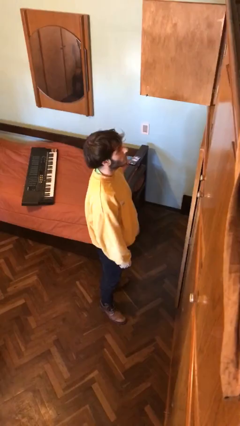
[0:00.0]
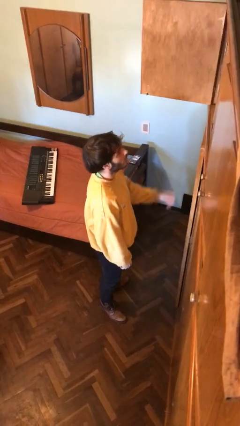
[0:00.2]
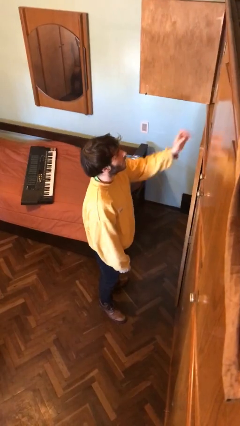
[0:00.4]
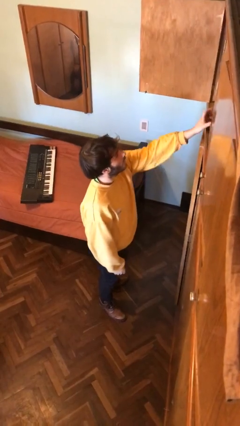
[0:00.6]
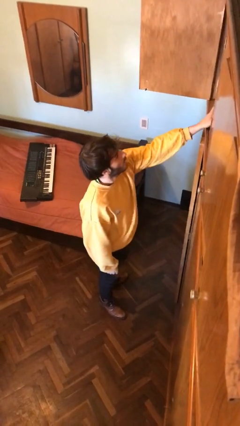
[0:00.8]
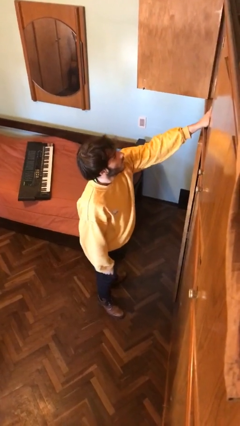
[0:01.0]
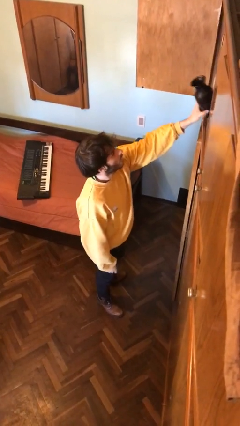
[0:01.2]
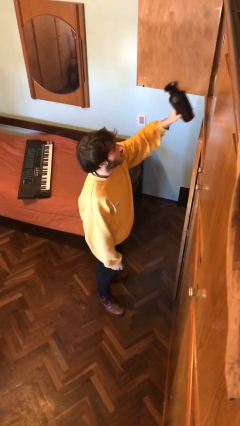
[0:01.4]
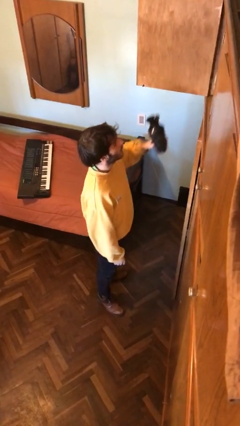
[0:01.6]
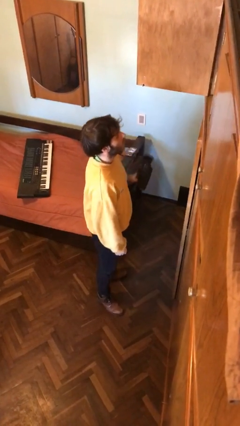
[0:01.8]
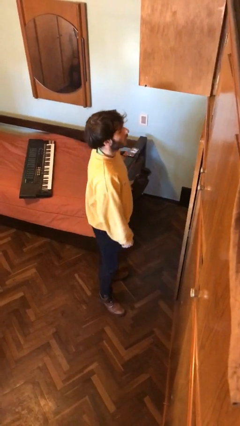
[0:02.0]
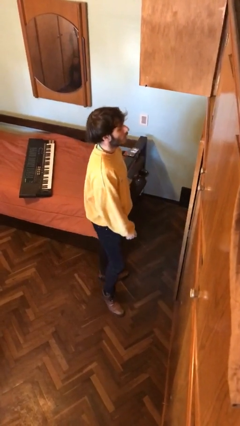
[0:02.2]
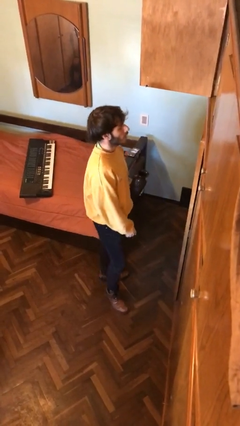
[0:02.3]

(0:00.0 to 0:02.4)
person picks up object from cabinet

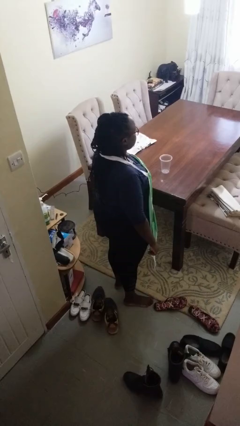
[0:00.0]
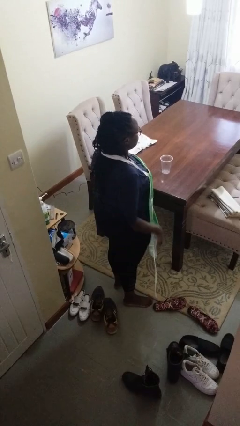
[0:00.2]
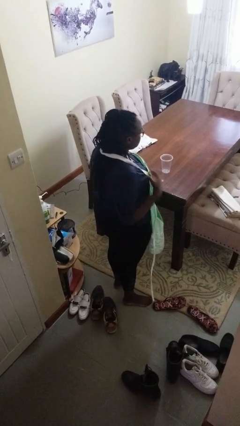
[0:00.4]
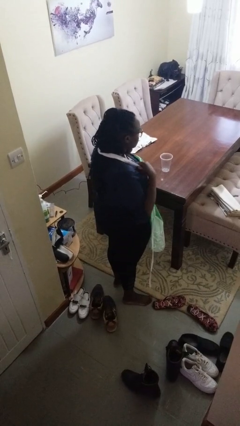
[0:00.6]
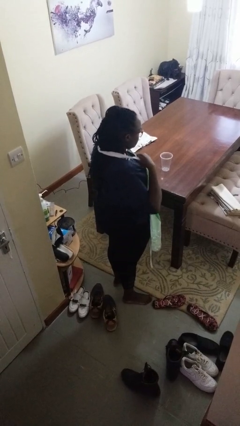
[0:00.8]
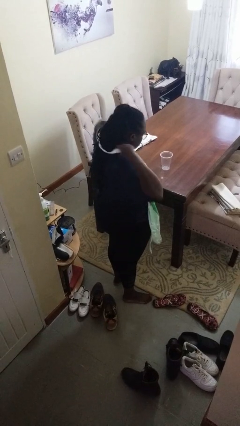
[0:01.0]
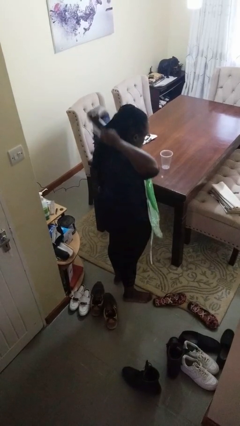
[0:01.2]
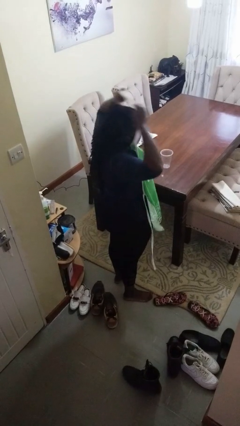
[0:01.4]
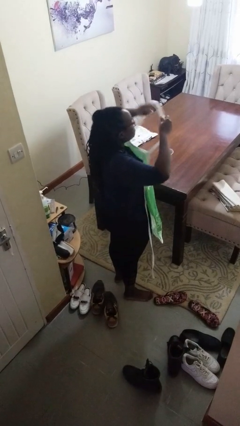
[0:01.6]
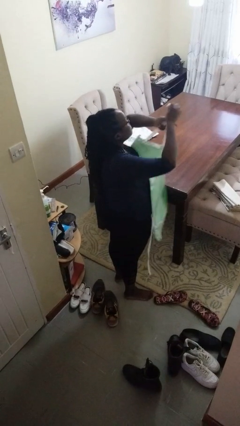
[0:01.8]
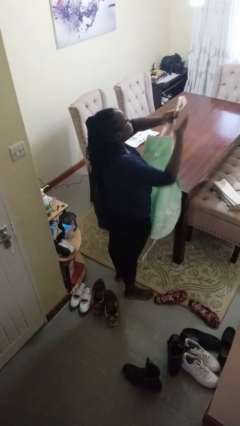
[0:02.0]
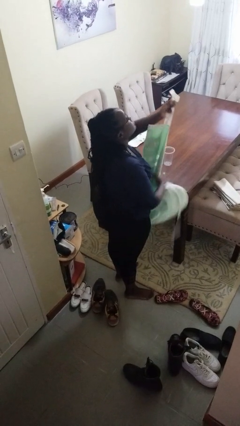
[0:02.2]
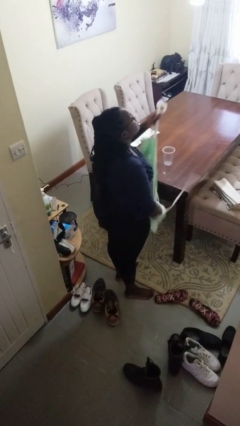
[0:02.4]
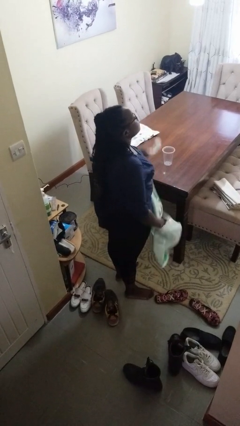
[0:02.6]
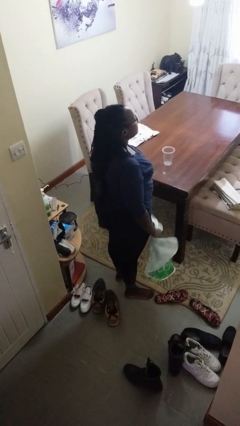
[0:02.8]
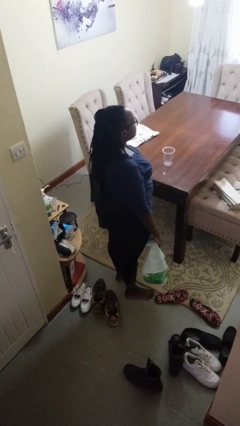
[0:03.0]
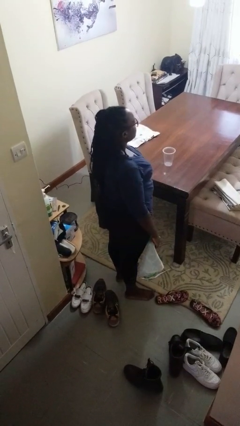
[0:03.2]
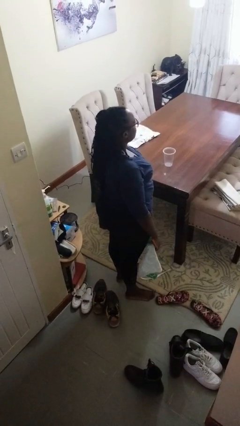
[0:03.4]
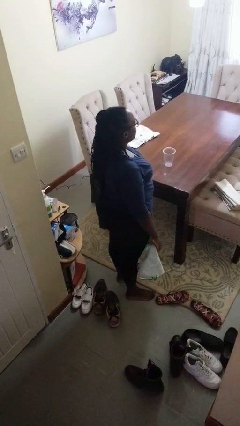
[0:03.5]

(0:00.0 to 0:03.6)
person takes off apron

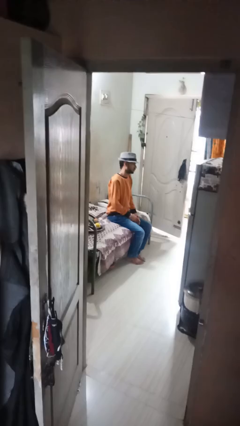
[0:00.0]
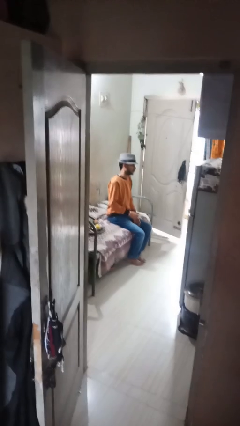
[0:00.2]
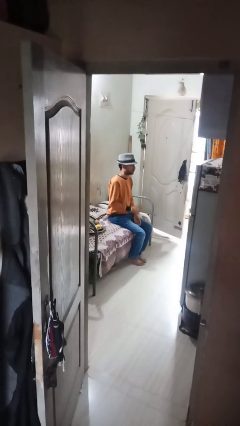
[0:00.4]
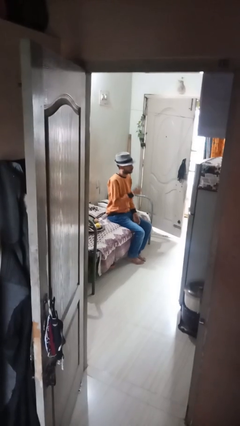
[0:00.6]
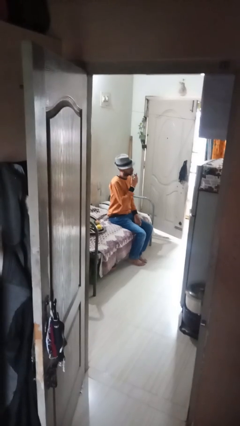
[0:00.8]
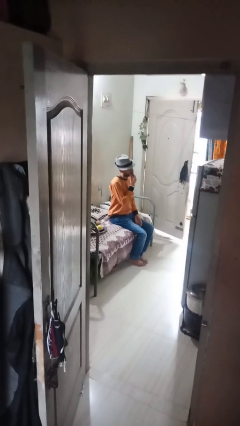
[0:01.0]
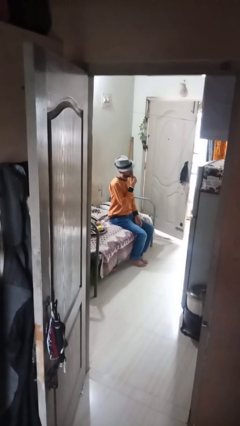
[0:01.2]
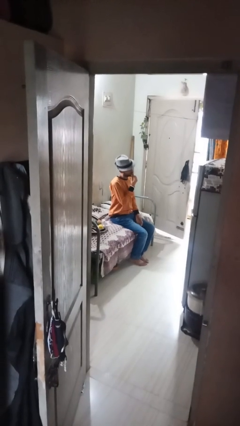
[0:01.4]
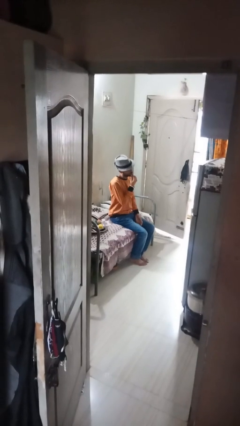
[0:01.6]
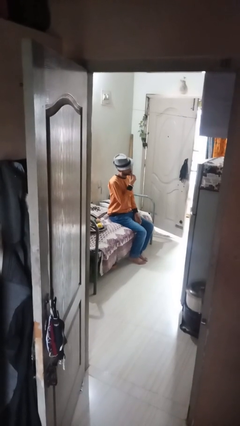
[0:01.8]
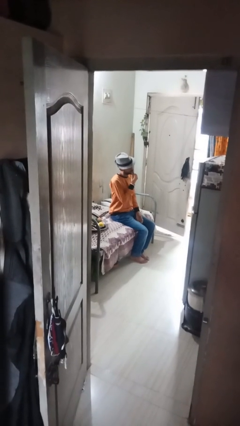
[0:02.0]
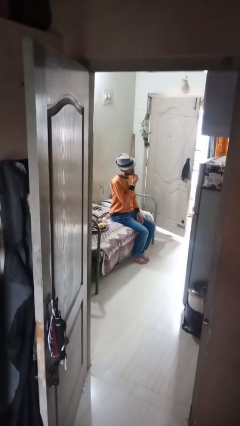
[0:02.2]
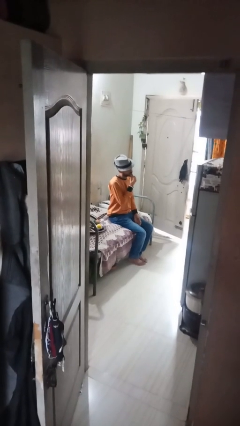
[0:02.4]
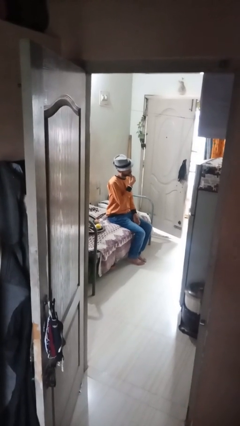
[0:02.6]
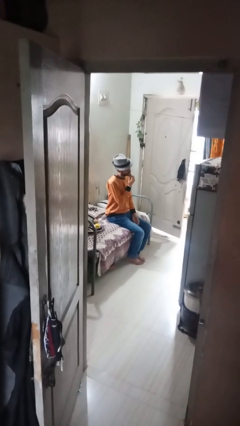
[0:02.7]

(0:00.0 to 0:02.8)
person strokes chin

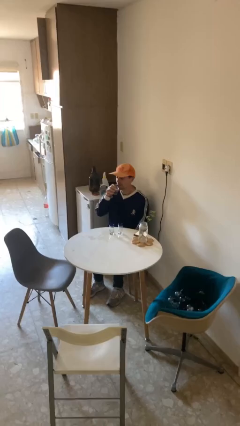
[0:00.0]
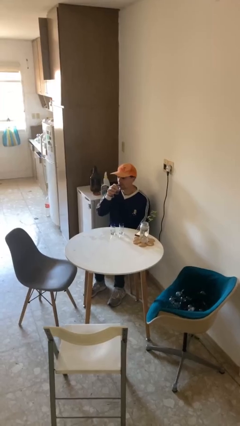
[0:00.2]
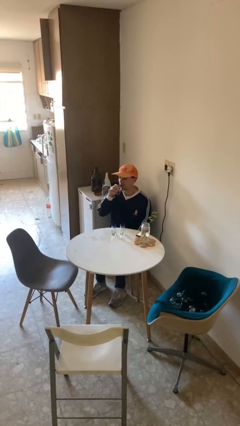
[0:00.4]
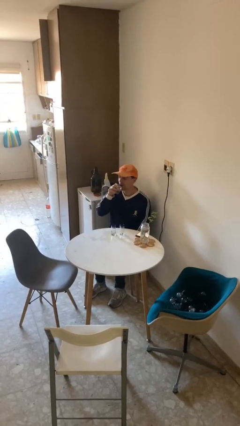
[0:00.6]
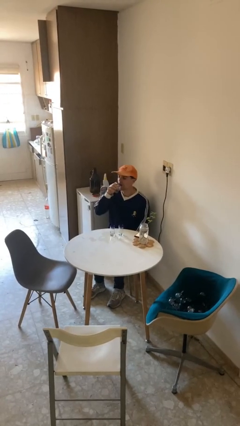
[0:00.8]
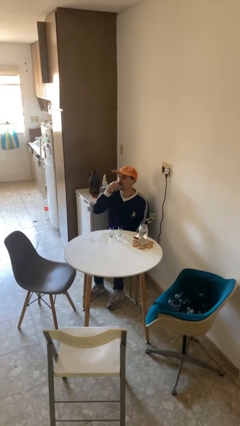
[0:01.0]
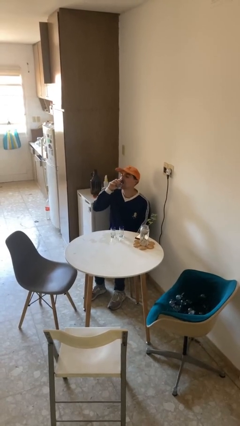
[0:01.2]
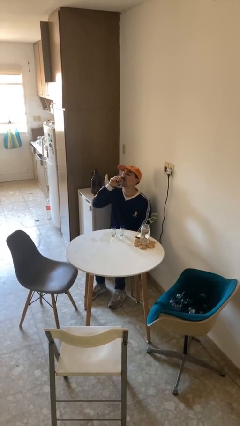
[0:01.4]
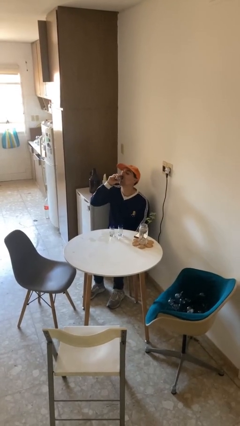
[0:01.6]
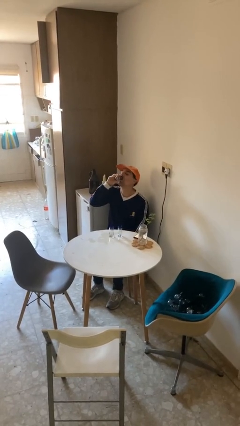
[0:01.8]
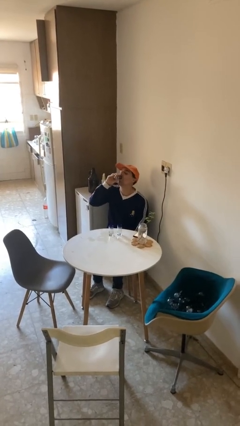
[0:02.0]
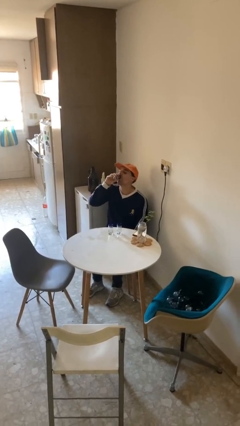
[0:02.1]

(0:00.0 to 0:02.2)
person drinks from shotglass

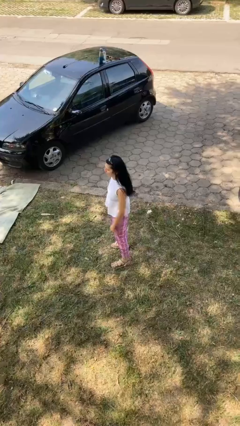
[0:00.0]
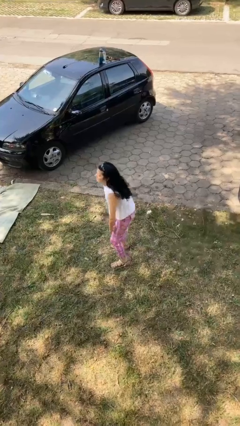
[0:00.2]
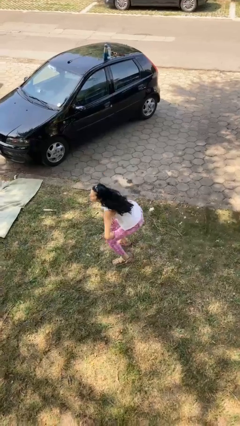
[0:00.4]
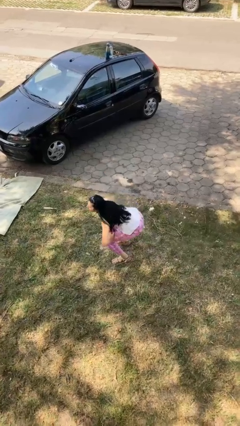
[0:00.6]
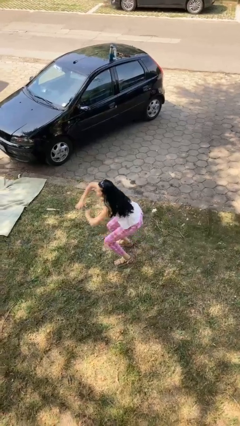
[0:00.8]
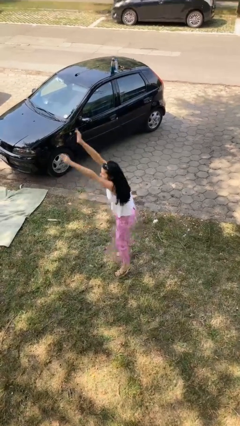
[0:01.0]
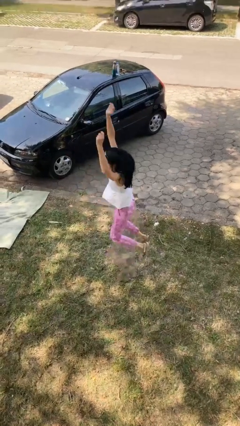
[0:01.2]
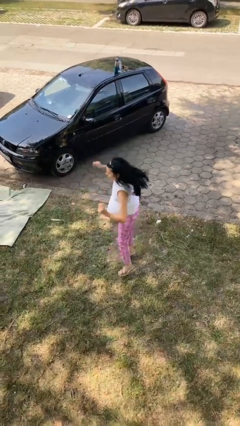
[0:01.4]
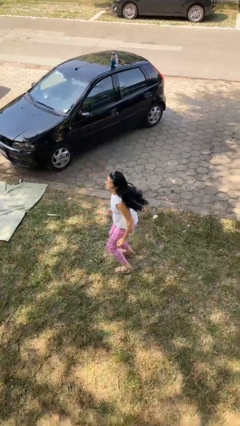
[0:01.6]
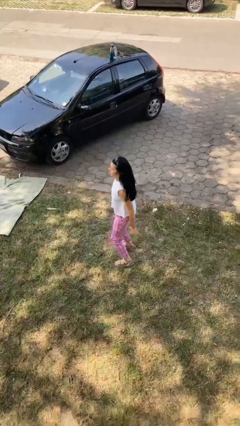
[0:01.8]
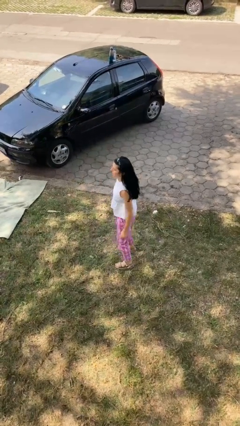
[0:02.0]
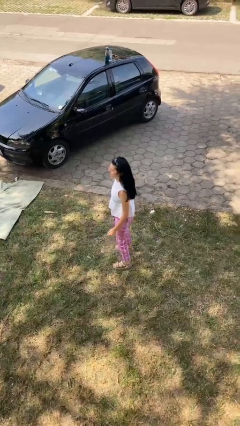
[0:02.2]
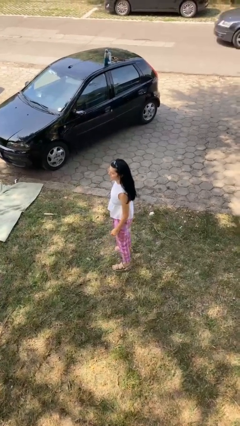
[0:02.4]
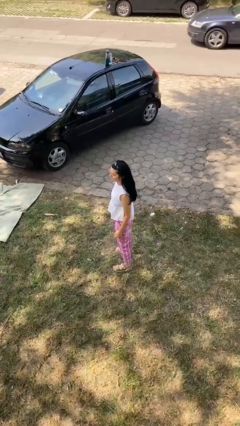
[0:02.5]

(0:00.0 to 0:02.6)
person jumps

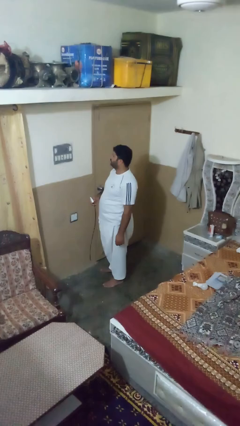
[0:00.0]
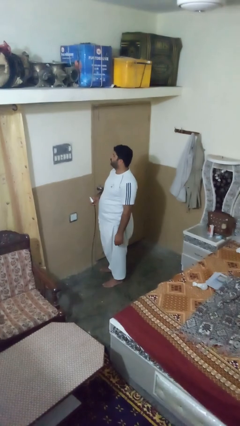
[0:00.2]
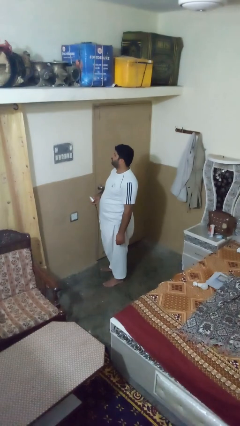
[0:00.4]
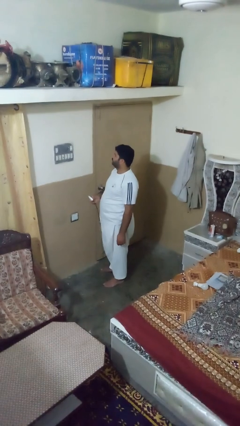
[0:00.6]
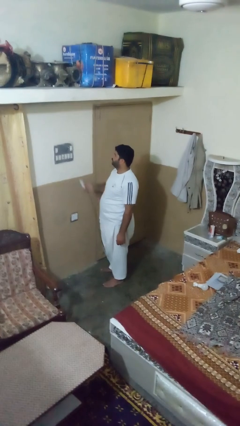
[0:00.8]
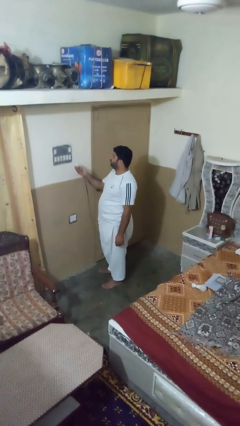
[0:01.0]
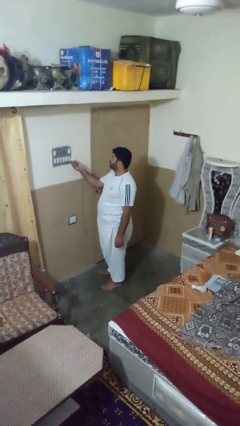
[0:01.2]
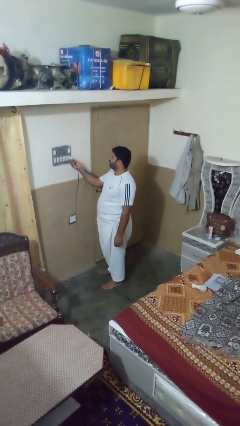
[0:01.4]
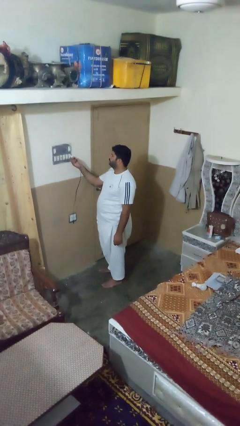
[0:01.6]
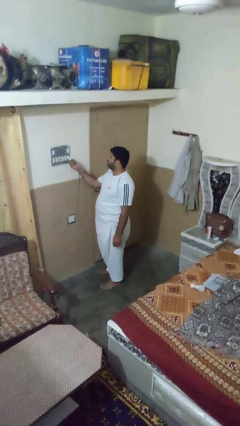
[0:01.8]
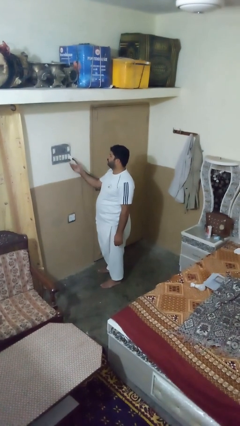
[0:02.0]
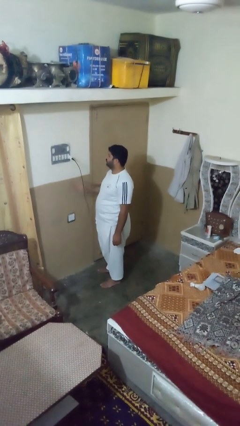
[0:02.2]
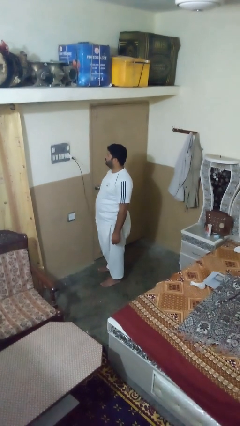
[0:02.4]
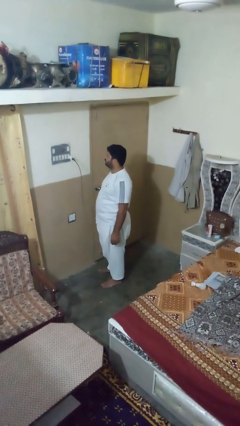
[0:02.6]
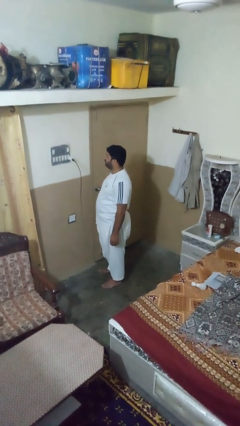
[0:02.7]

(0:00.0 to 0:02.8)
person plugs into electrical socket

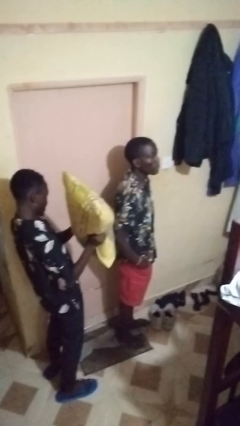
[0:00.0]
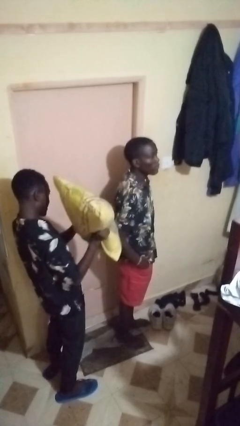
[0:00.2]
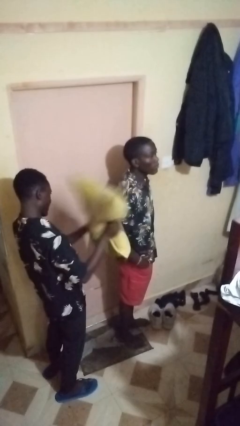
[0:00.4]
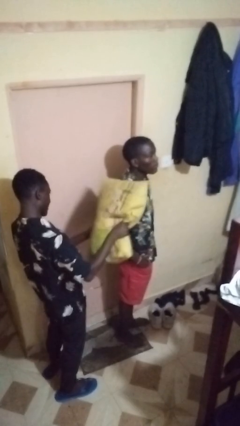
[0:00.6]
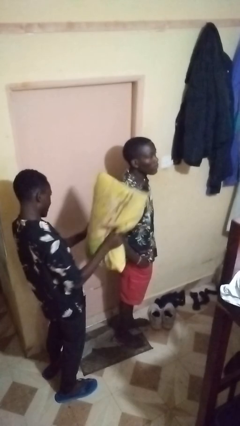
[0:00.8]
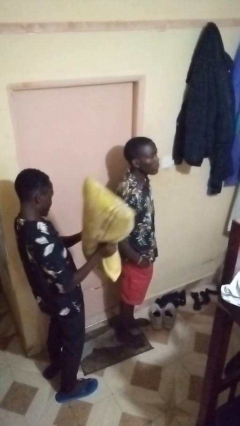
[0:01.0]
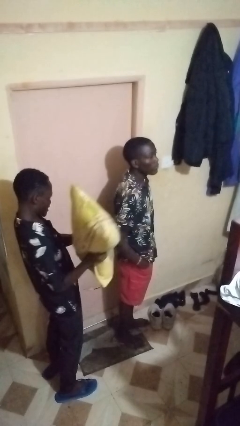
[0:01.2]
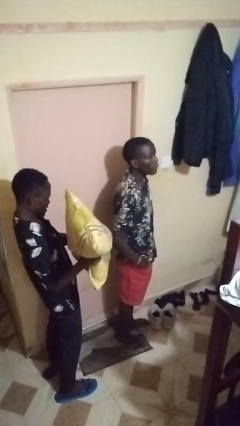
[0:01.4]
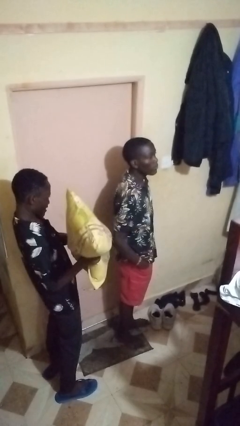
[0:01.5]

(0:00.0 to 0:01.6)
person hits person with pillow
